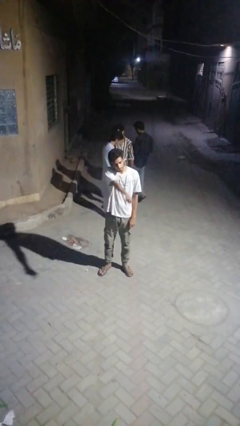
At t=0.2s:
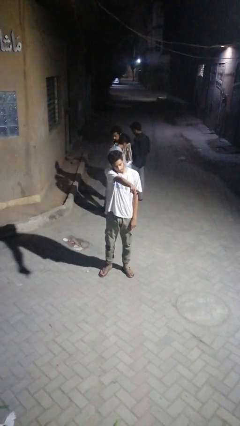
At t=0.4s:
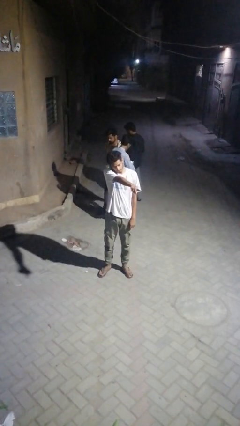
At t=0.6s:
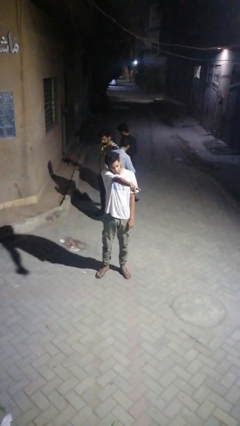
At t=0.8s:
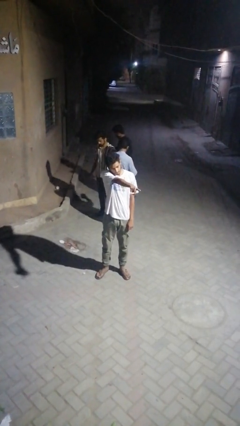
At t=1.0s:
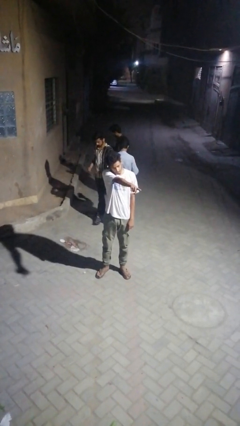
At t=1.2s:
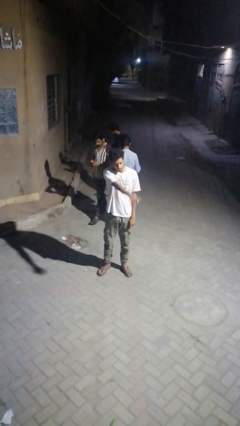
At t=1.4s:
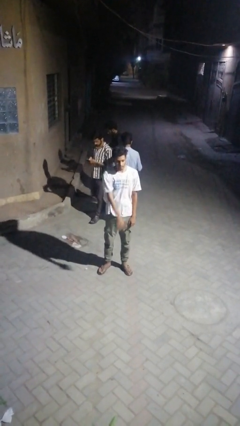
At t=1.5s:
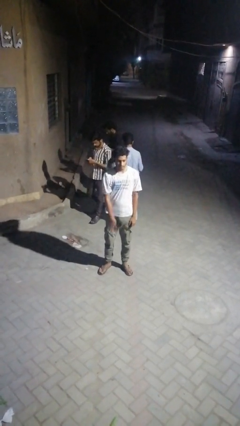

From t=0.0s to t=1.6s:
person points at person

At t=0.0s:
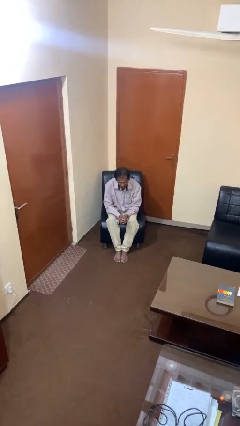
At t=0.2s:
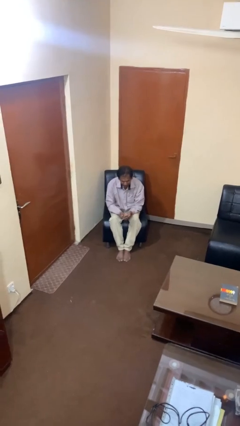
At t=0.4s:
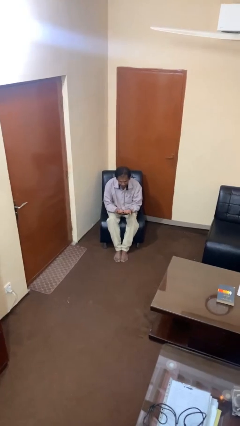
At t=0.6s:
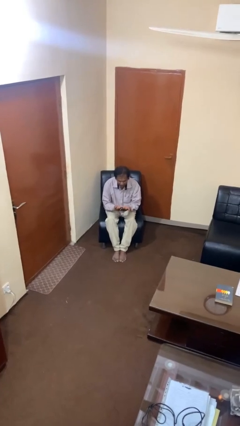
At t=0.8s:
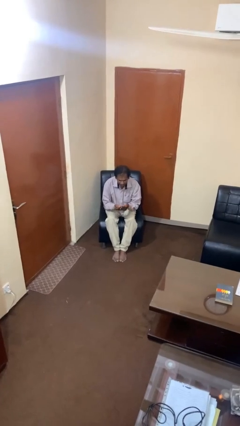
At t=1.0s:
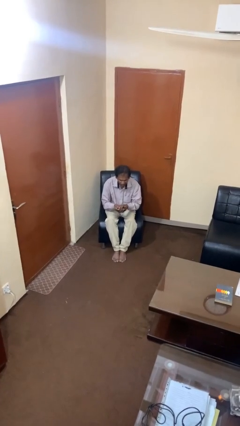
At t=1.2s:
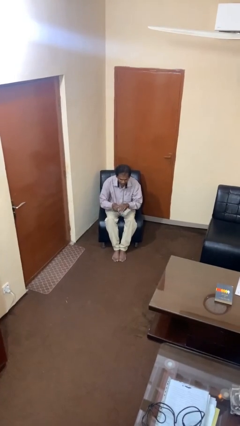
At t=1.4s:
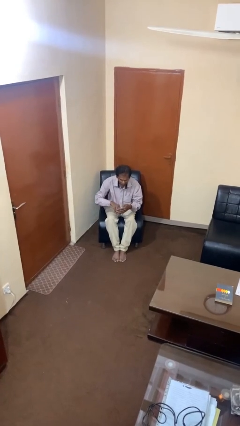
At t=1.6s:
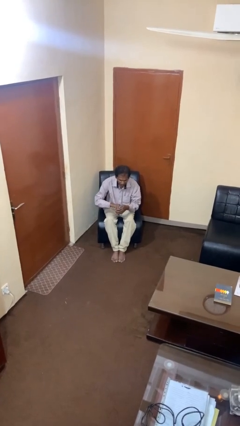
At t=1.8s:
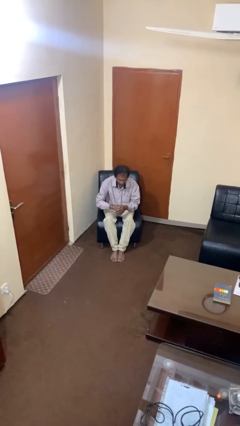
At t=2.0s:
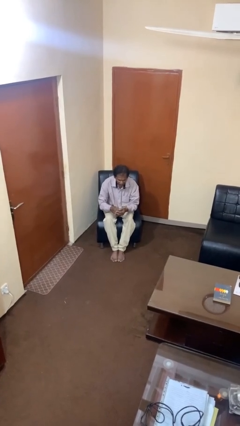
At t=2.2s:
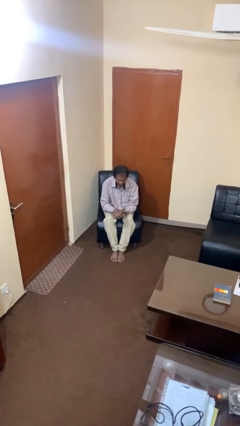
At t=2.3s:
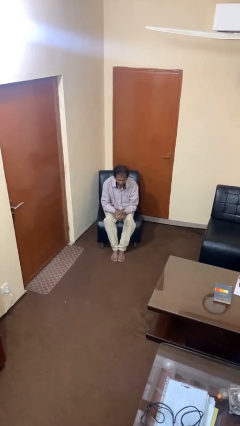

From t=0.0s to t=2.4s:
person looks at hands in lap

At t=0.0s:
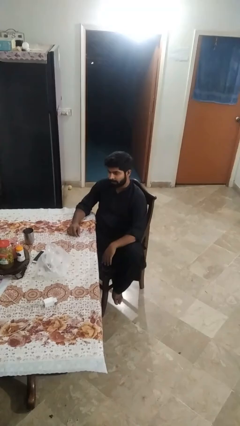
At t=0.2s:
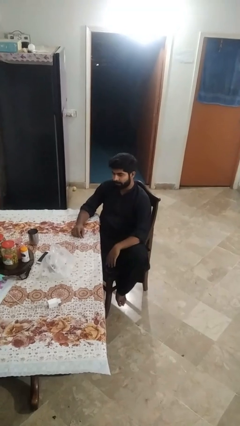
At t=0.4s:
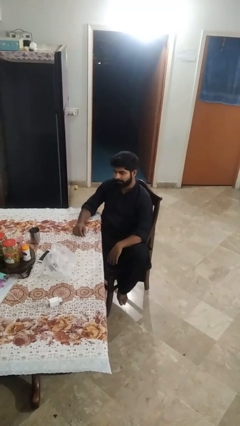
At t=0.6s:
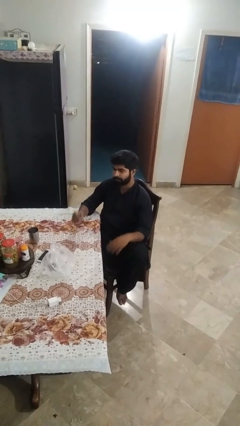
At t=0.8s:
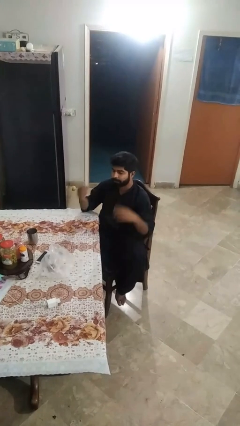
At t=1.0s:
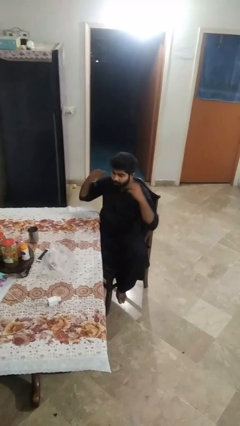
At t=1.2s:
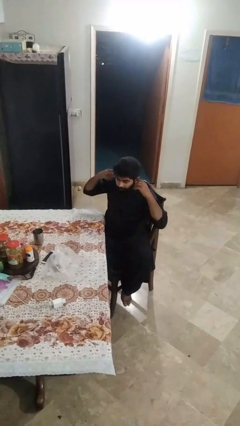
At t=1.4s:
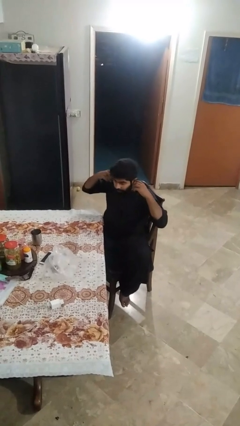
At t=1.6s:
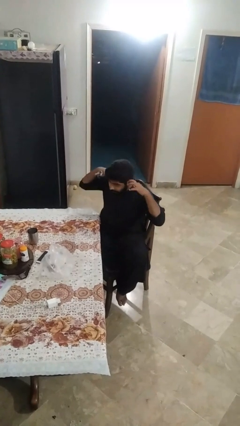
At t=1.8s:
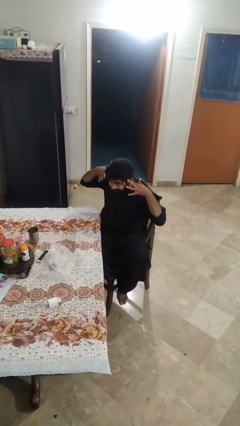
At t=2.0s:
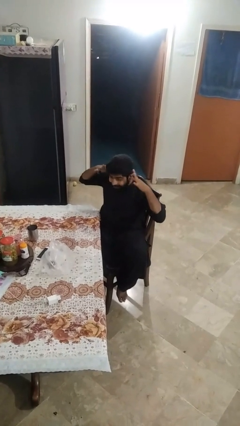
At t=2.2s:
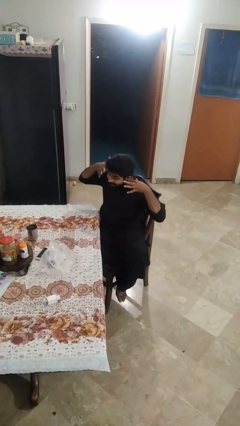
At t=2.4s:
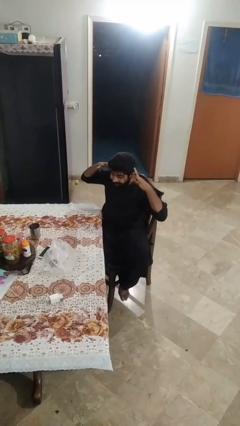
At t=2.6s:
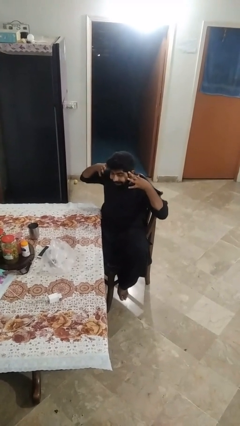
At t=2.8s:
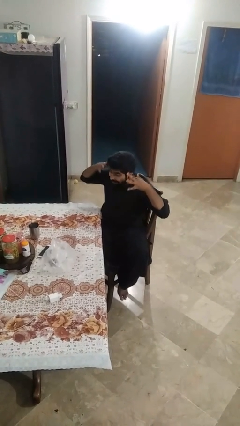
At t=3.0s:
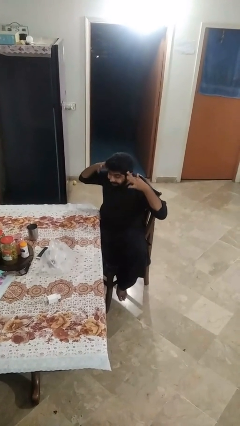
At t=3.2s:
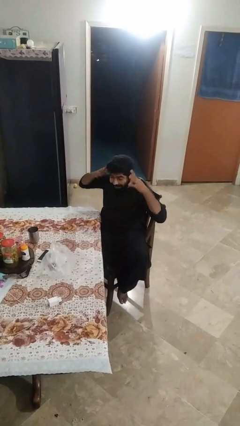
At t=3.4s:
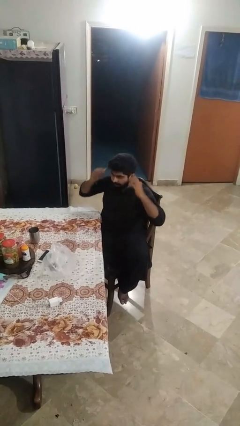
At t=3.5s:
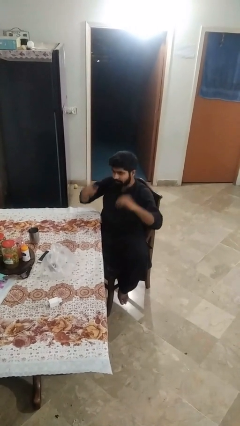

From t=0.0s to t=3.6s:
person puts fingers in ear

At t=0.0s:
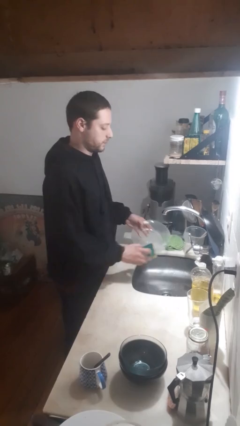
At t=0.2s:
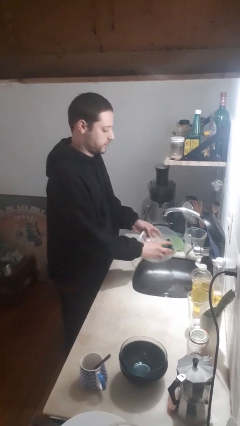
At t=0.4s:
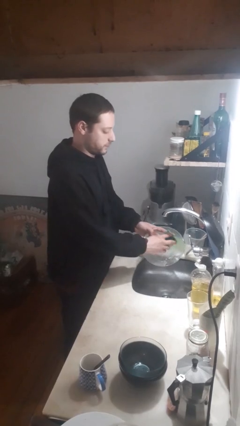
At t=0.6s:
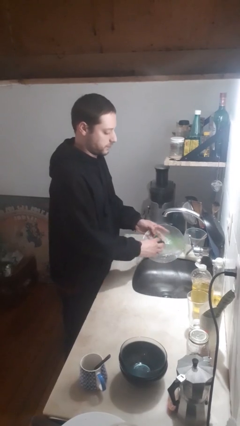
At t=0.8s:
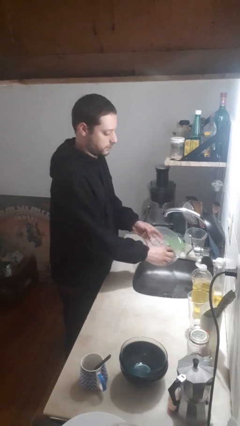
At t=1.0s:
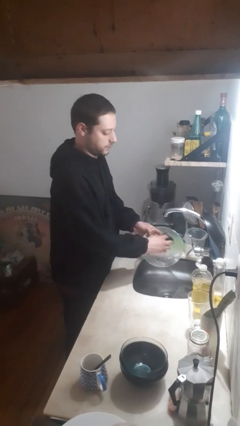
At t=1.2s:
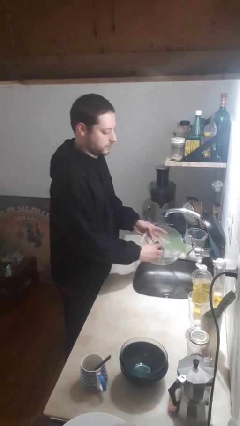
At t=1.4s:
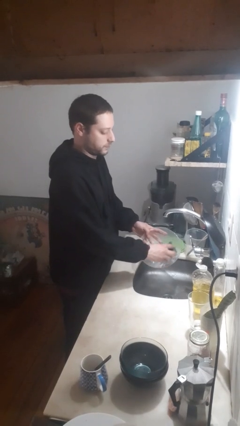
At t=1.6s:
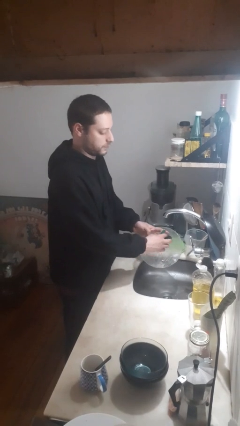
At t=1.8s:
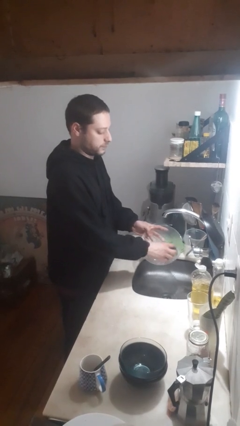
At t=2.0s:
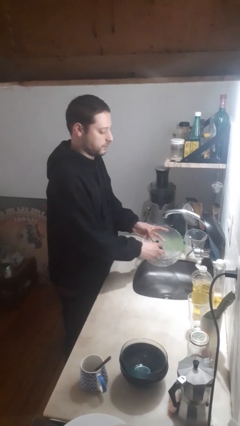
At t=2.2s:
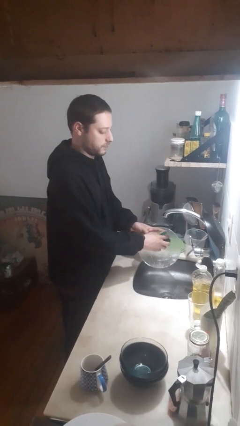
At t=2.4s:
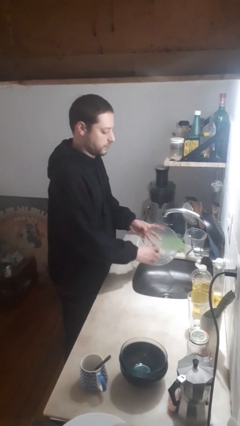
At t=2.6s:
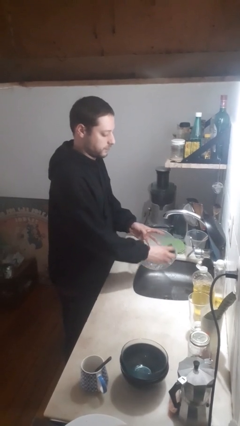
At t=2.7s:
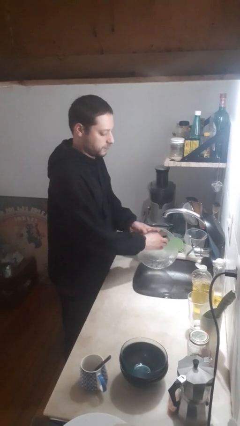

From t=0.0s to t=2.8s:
person washes dish

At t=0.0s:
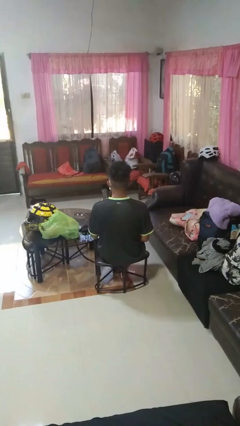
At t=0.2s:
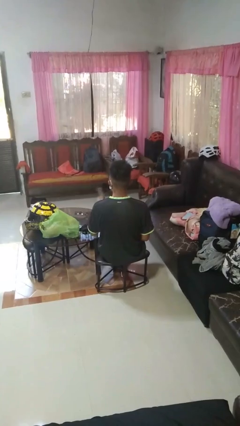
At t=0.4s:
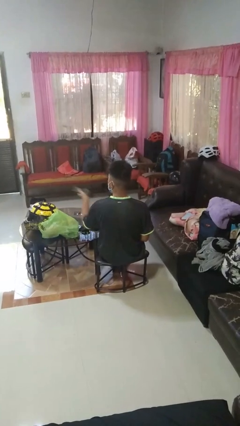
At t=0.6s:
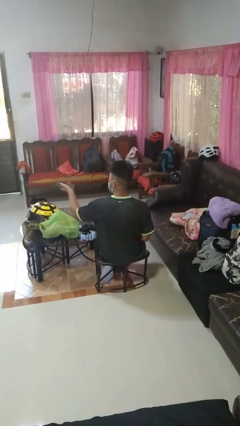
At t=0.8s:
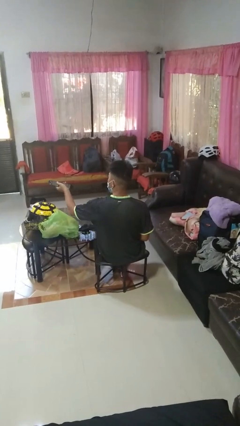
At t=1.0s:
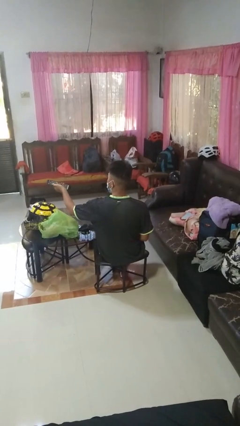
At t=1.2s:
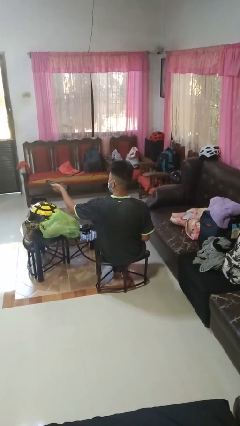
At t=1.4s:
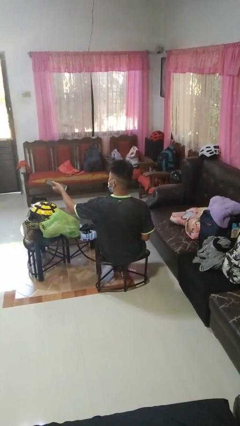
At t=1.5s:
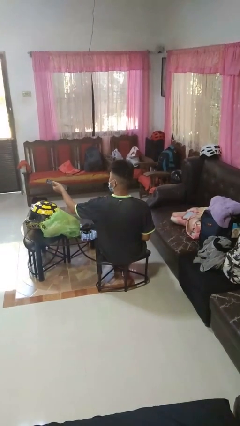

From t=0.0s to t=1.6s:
person uses television remote

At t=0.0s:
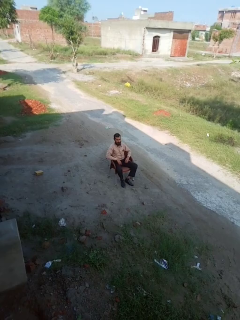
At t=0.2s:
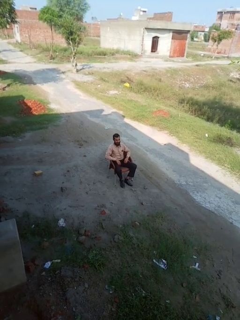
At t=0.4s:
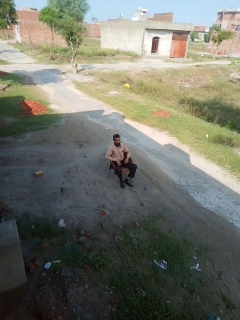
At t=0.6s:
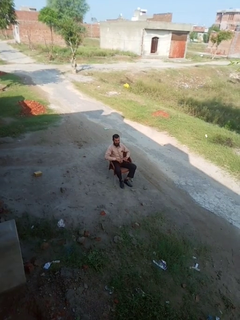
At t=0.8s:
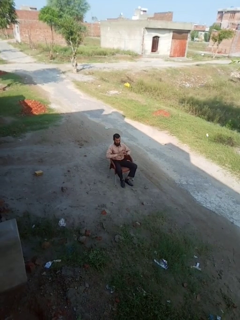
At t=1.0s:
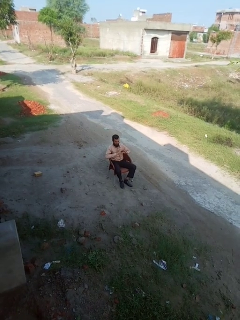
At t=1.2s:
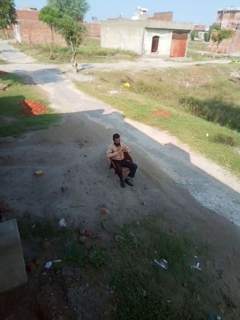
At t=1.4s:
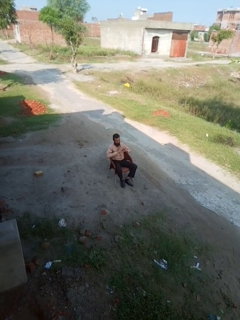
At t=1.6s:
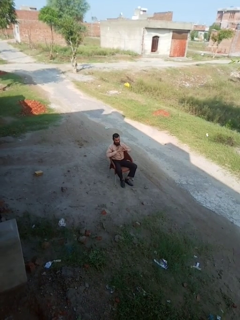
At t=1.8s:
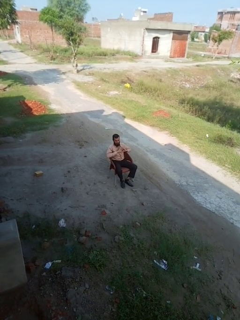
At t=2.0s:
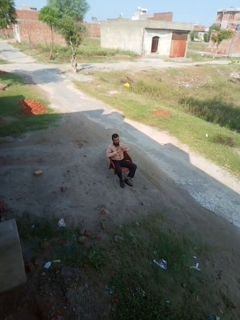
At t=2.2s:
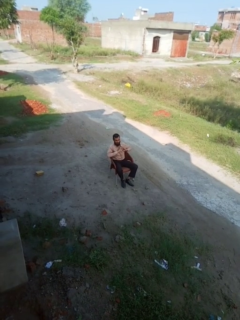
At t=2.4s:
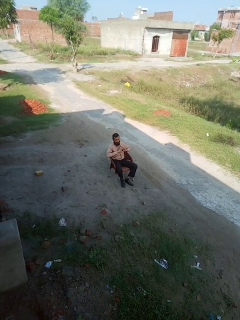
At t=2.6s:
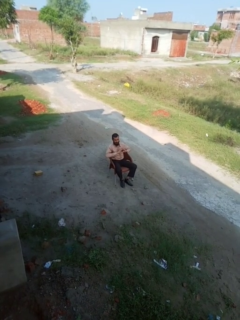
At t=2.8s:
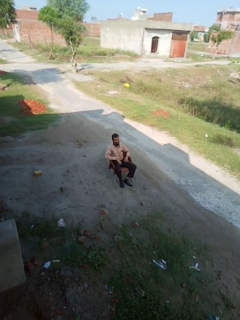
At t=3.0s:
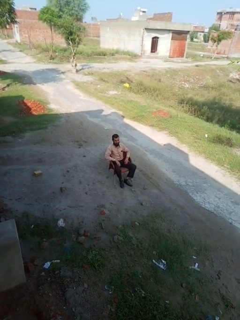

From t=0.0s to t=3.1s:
person gestures heart

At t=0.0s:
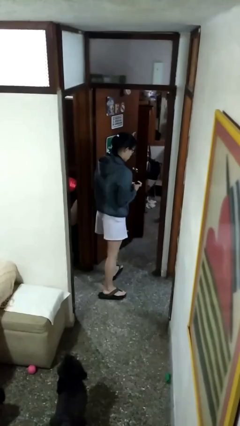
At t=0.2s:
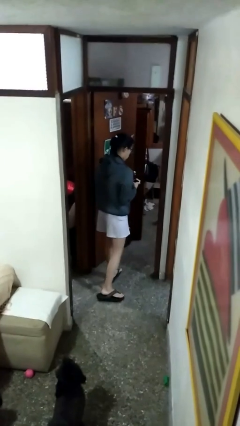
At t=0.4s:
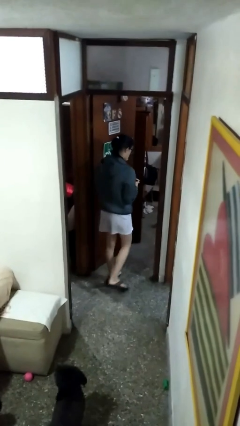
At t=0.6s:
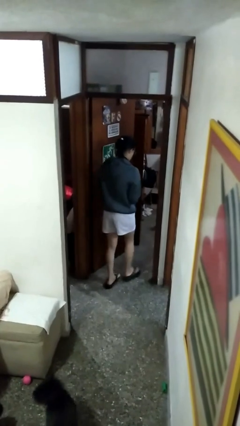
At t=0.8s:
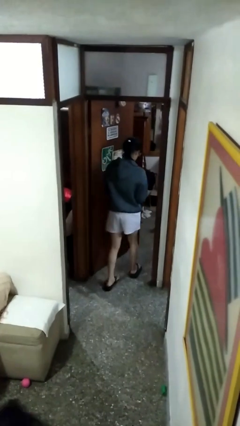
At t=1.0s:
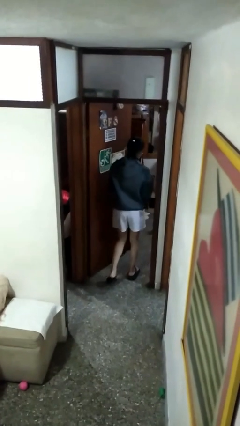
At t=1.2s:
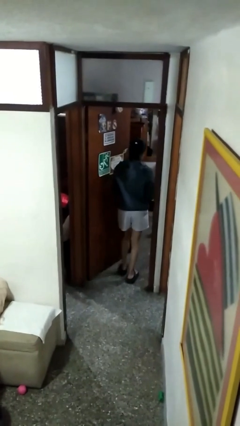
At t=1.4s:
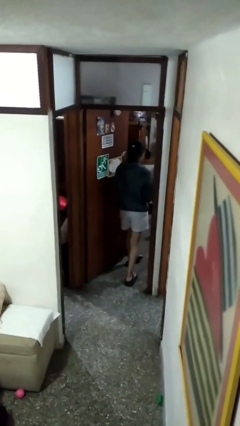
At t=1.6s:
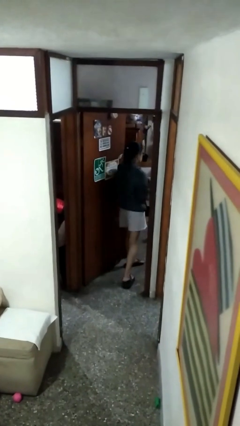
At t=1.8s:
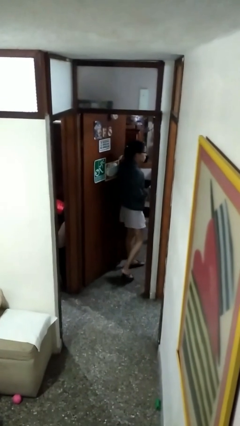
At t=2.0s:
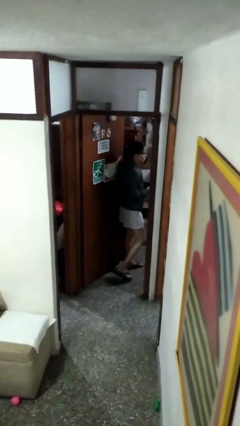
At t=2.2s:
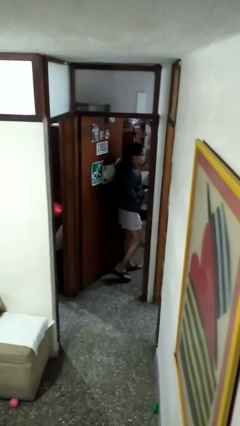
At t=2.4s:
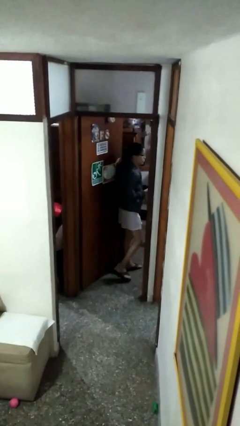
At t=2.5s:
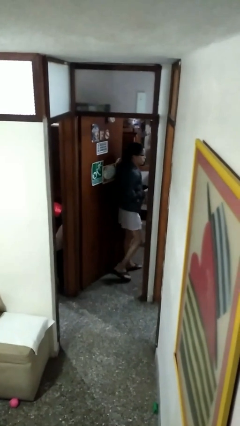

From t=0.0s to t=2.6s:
person exits scene through structure
